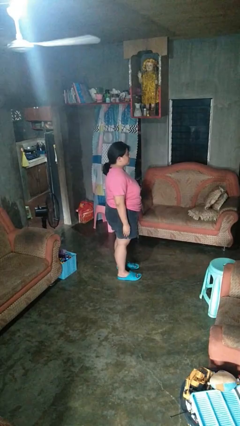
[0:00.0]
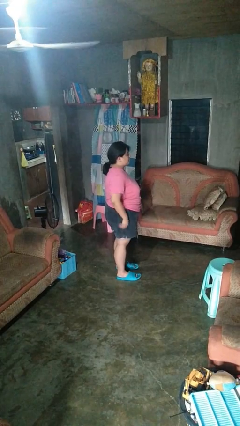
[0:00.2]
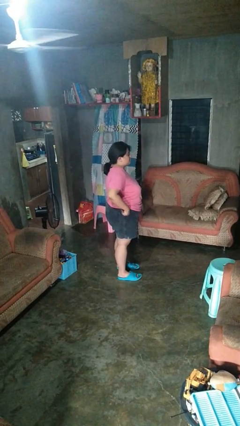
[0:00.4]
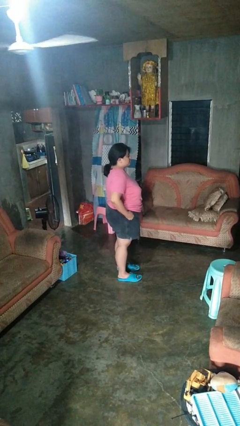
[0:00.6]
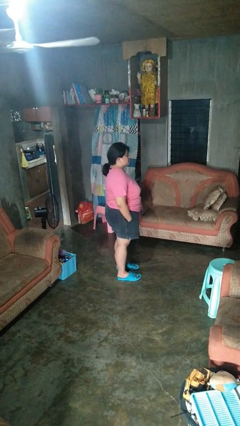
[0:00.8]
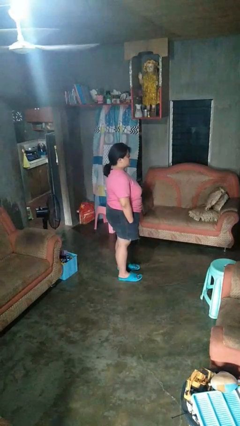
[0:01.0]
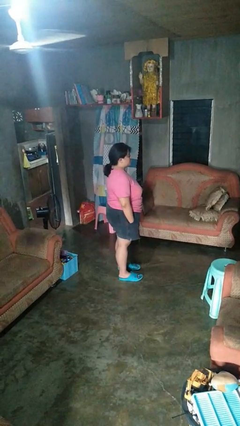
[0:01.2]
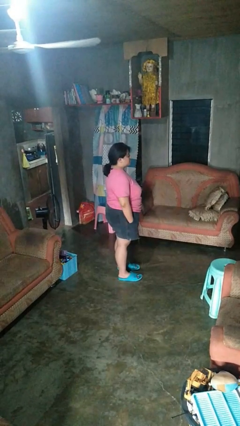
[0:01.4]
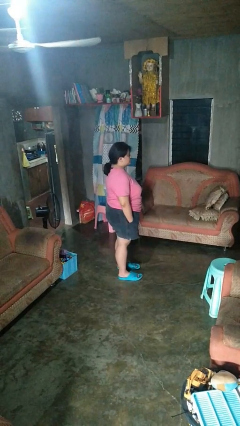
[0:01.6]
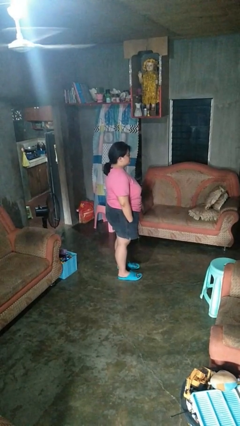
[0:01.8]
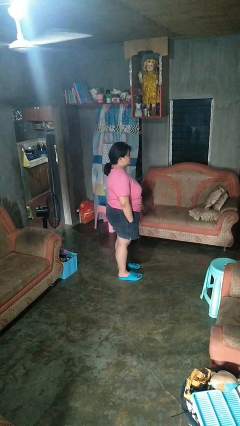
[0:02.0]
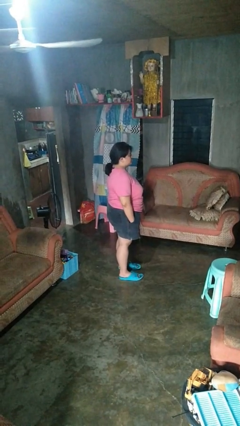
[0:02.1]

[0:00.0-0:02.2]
person puts hands in back pockets

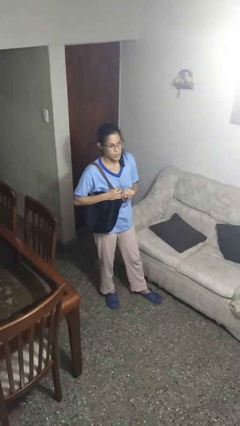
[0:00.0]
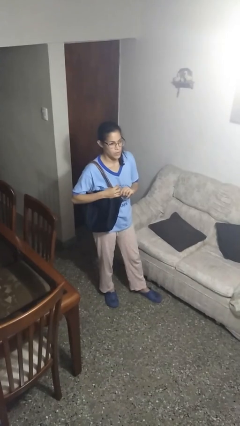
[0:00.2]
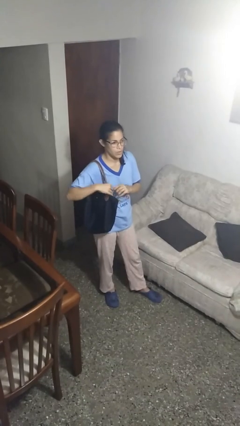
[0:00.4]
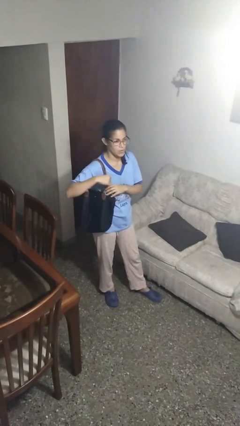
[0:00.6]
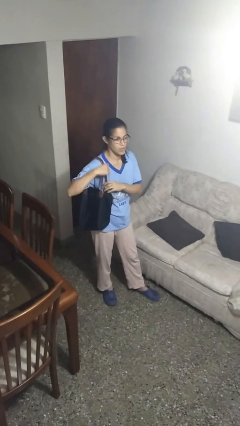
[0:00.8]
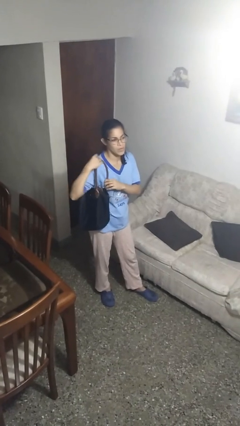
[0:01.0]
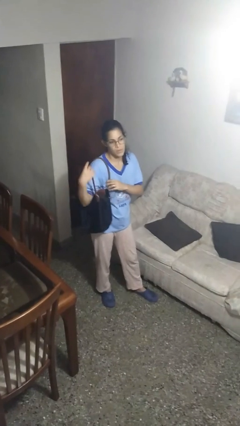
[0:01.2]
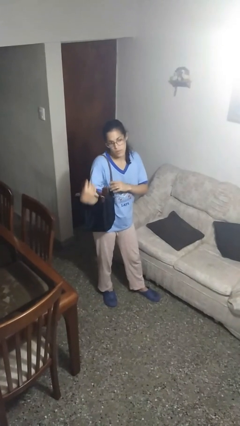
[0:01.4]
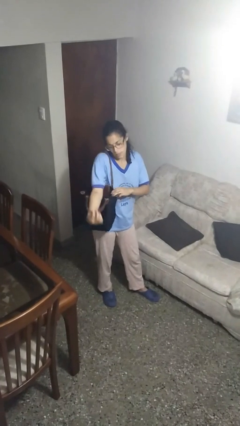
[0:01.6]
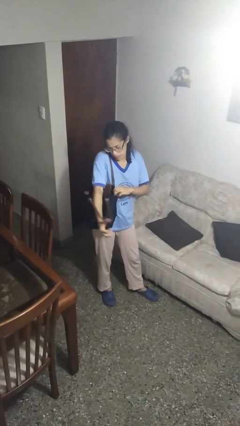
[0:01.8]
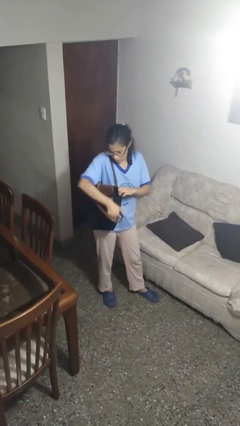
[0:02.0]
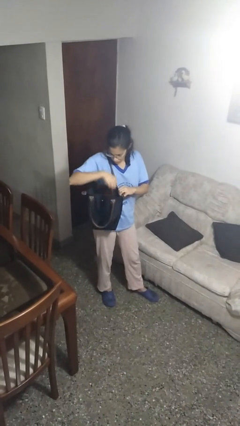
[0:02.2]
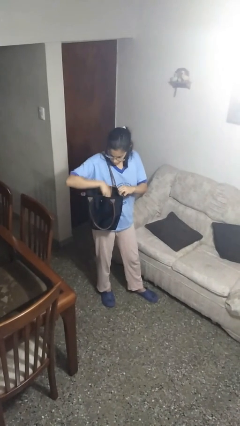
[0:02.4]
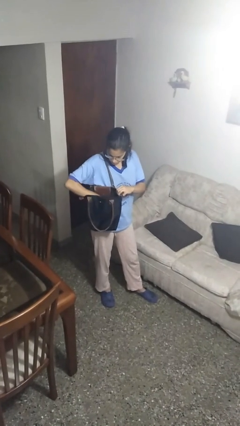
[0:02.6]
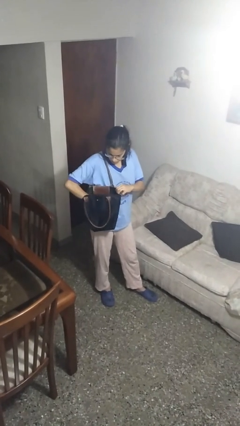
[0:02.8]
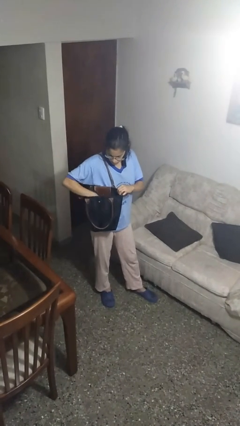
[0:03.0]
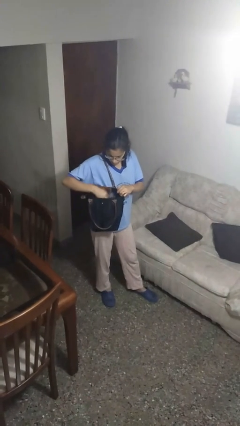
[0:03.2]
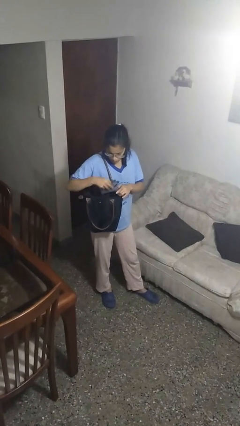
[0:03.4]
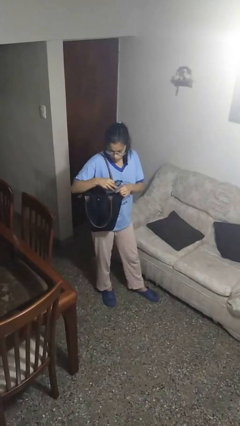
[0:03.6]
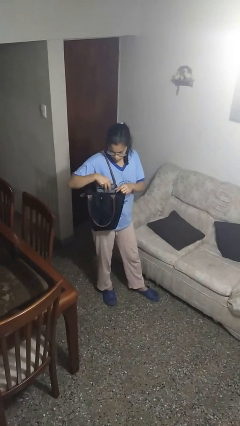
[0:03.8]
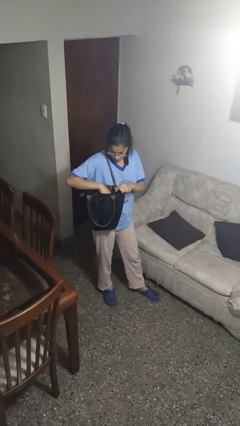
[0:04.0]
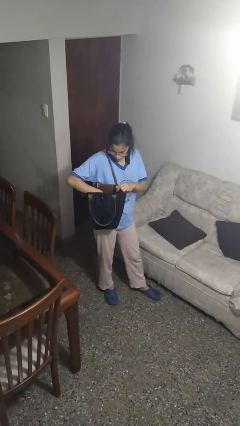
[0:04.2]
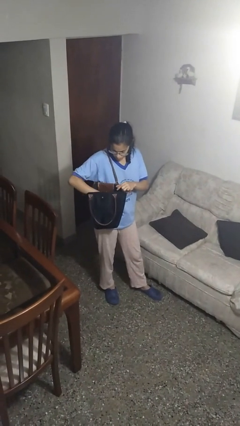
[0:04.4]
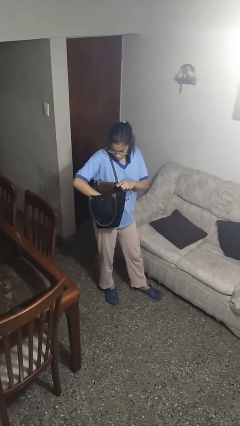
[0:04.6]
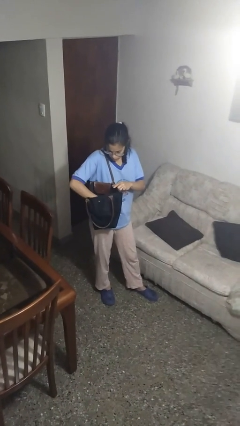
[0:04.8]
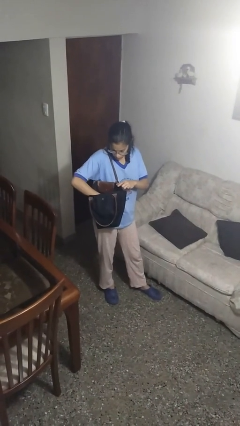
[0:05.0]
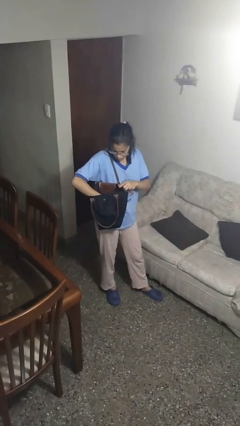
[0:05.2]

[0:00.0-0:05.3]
person searches in purse

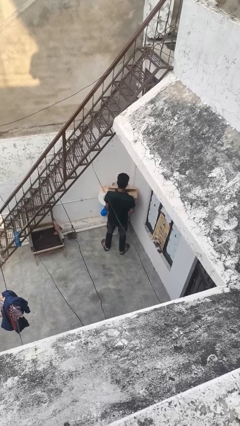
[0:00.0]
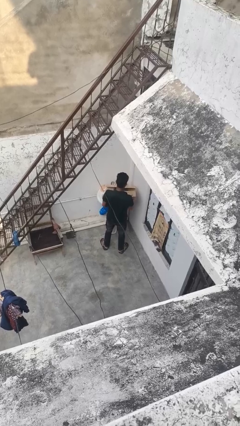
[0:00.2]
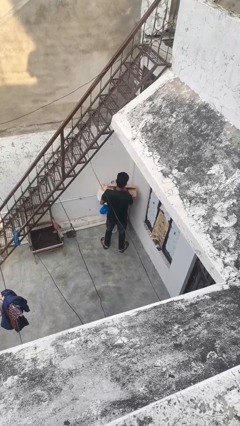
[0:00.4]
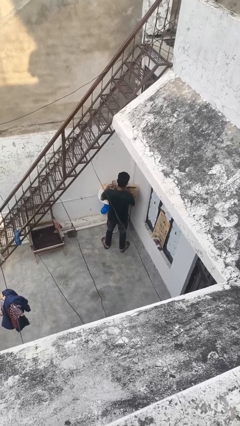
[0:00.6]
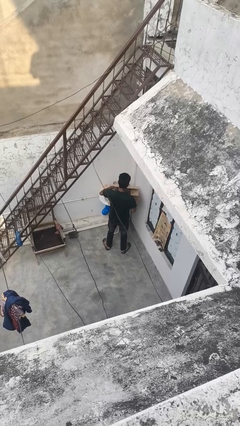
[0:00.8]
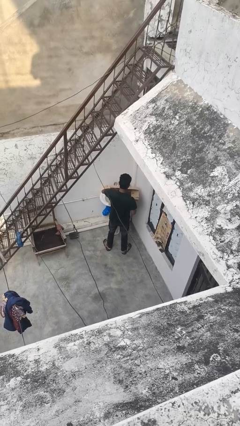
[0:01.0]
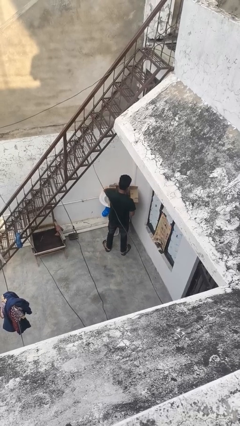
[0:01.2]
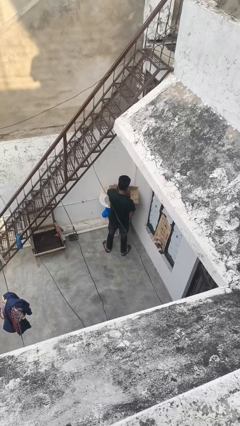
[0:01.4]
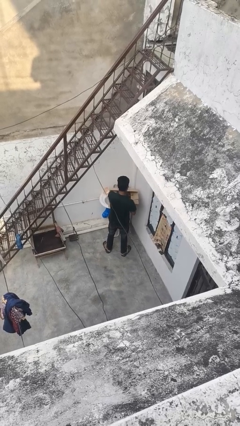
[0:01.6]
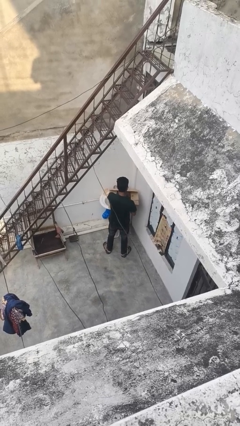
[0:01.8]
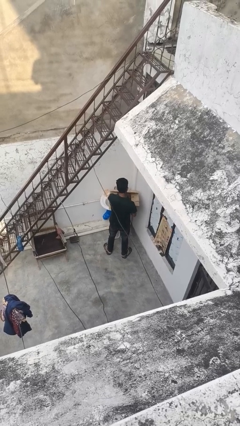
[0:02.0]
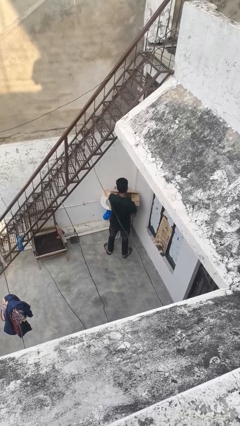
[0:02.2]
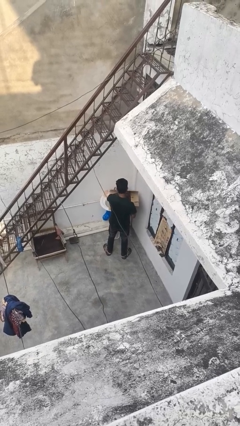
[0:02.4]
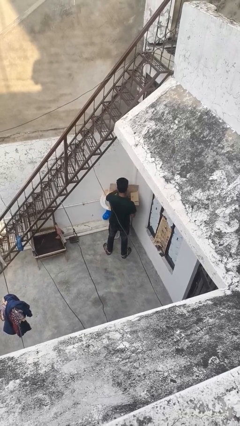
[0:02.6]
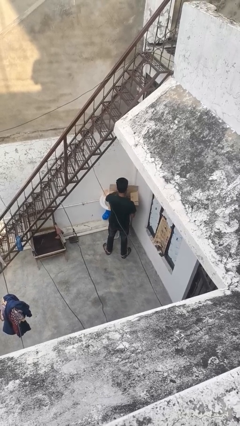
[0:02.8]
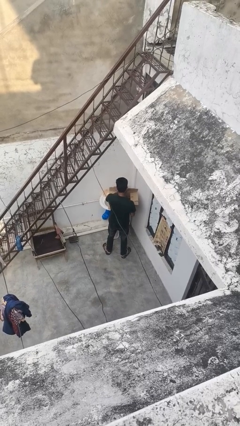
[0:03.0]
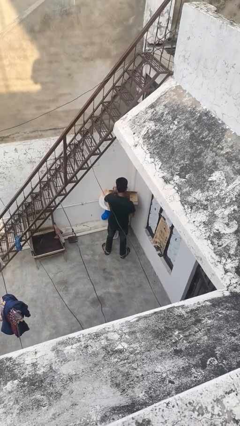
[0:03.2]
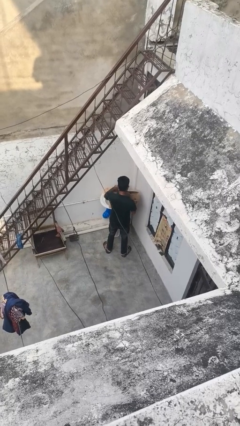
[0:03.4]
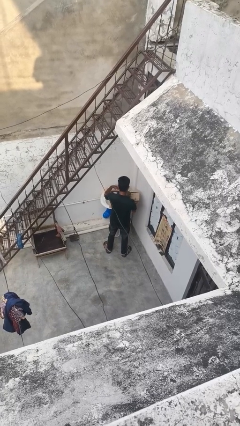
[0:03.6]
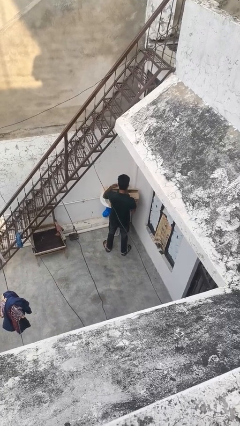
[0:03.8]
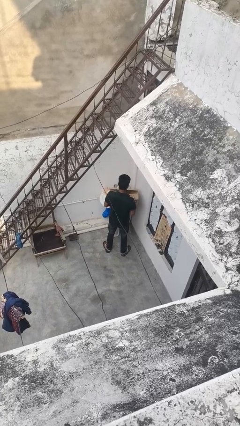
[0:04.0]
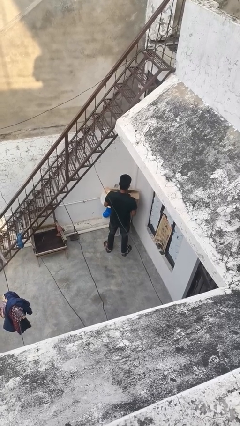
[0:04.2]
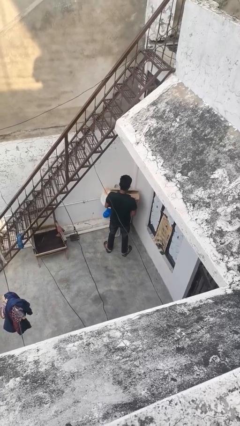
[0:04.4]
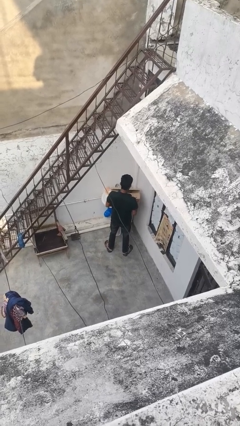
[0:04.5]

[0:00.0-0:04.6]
person searches in box

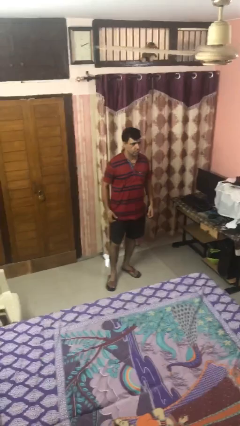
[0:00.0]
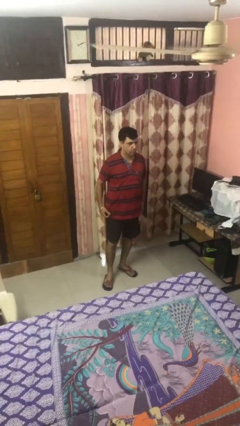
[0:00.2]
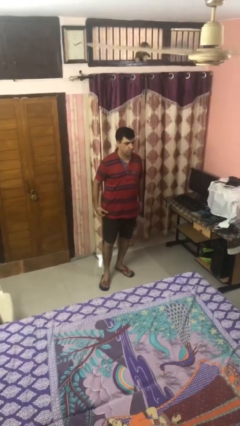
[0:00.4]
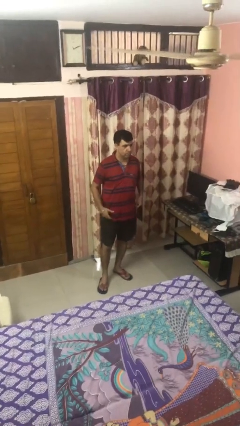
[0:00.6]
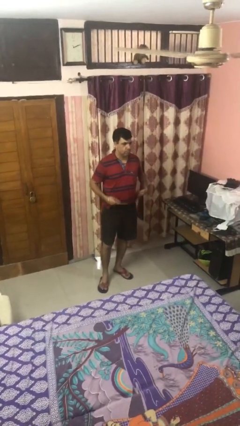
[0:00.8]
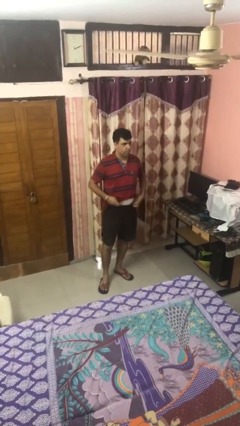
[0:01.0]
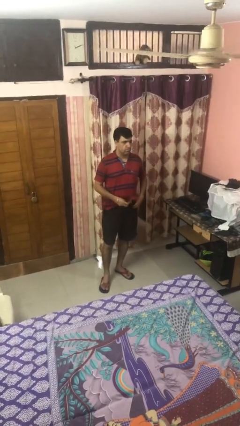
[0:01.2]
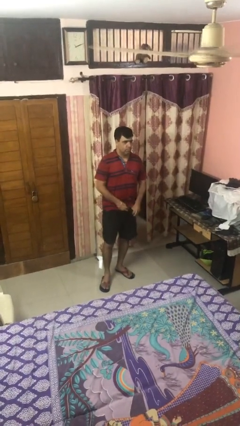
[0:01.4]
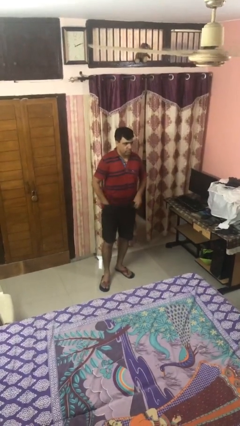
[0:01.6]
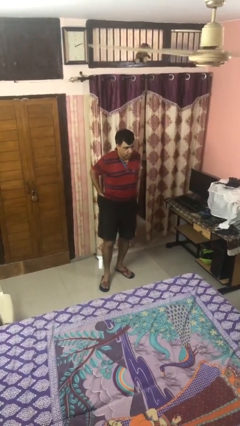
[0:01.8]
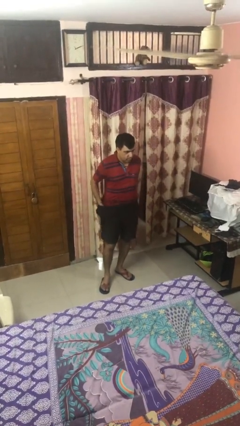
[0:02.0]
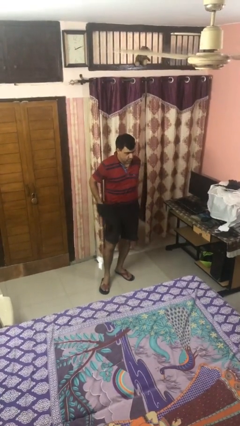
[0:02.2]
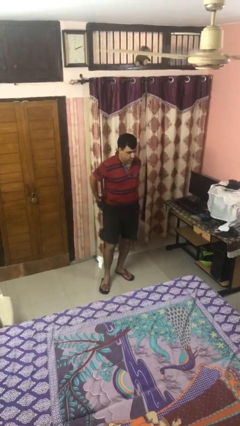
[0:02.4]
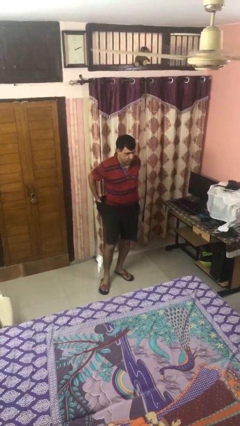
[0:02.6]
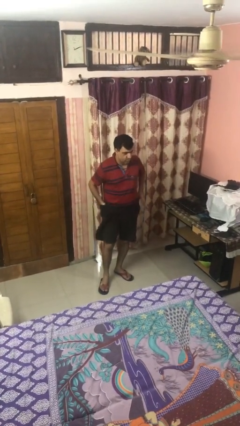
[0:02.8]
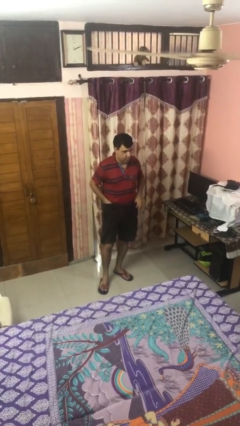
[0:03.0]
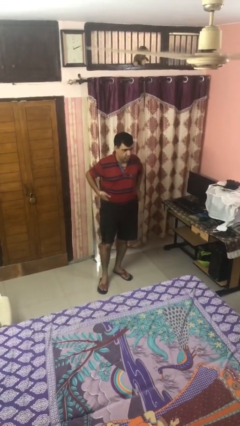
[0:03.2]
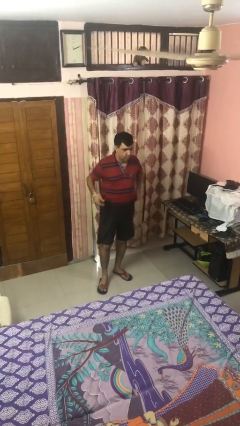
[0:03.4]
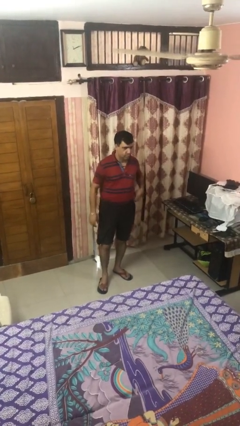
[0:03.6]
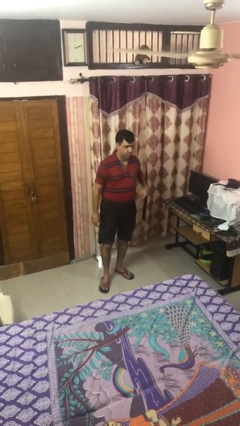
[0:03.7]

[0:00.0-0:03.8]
person tucks in shirt

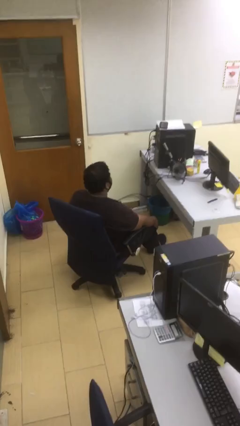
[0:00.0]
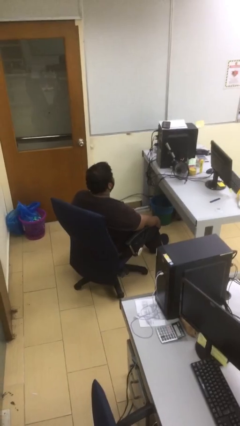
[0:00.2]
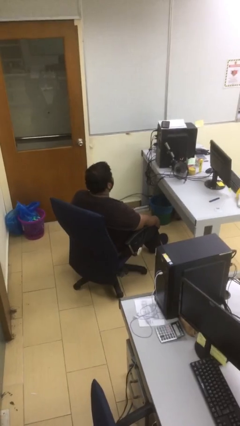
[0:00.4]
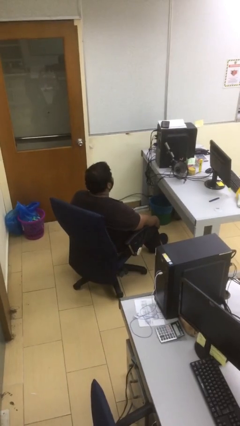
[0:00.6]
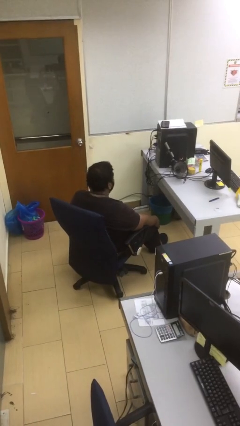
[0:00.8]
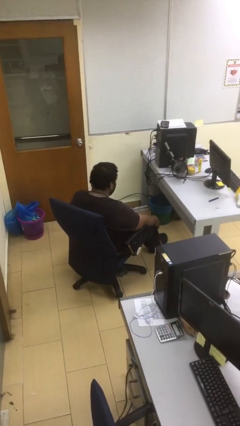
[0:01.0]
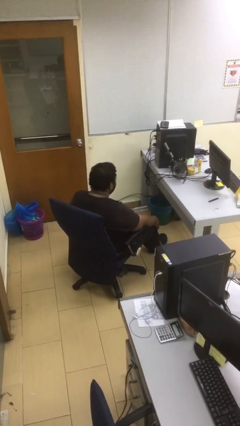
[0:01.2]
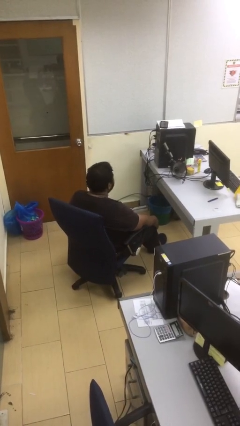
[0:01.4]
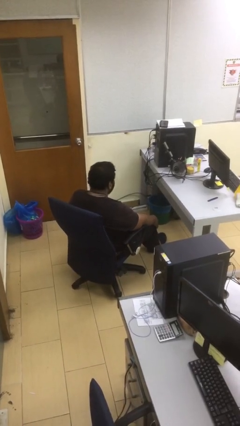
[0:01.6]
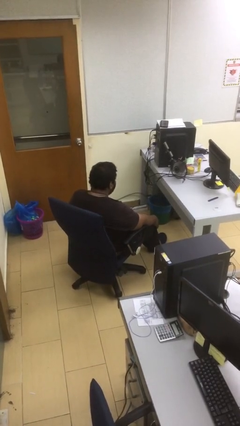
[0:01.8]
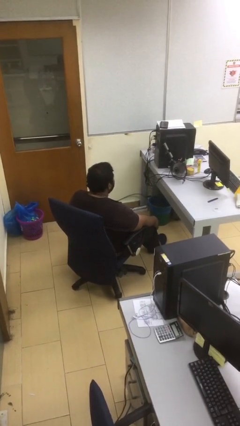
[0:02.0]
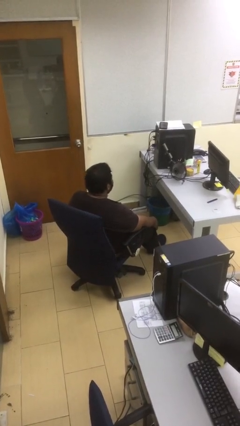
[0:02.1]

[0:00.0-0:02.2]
person nods head
